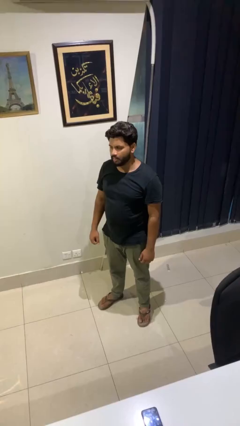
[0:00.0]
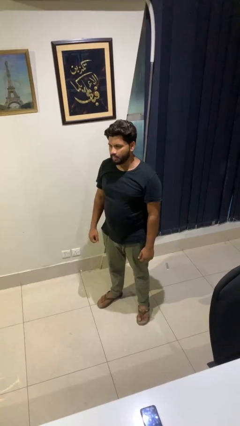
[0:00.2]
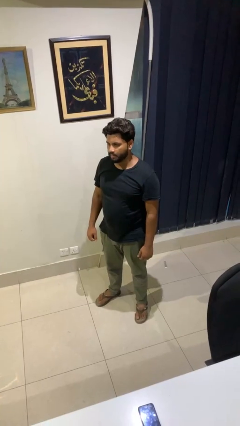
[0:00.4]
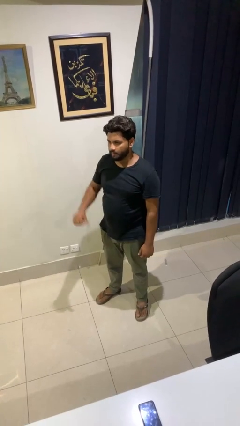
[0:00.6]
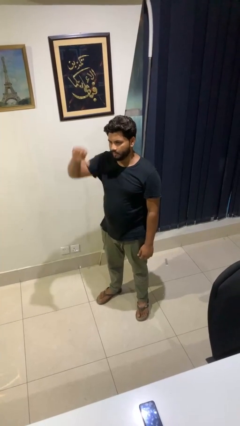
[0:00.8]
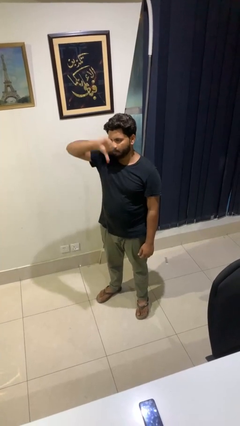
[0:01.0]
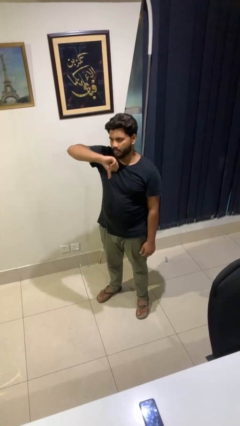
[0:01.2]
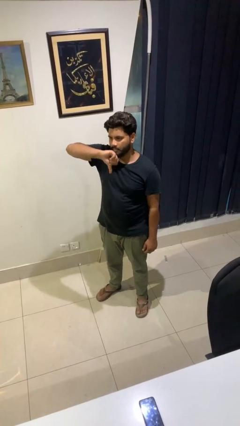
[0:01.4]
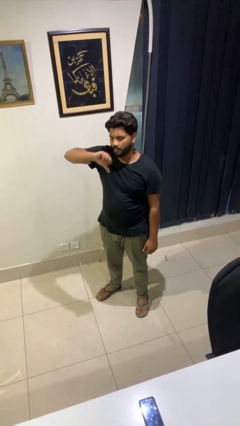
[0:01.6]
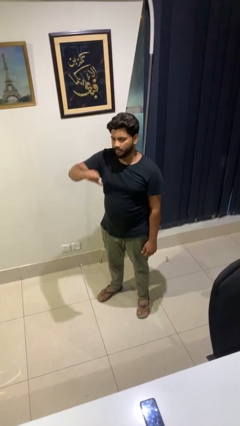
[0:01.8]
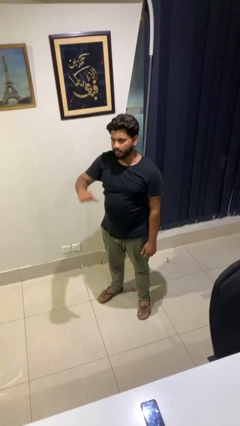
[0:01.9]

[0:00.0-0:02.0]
person gestures thumbs down

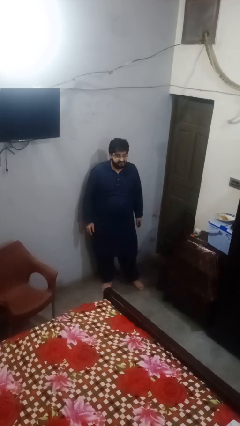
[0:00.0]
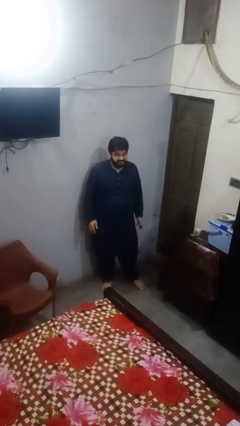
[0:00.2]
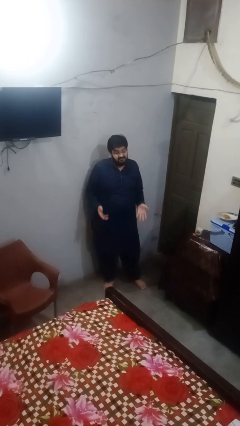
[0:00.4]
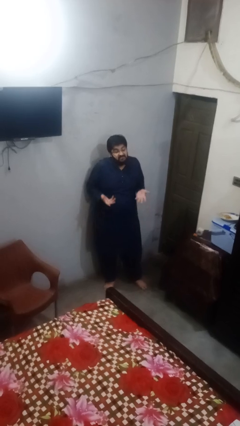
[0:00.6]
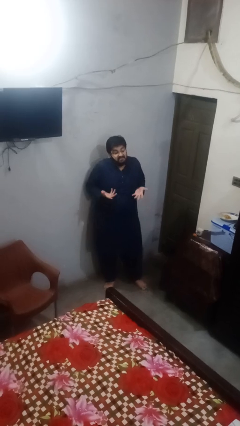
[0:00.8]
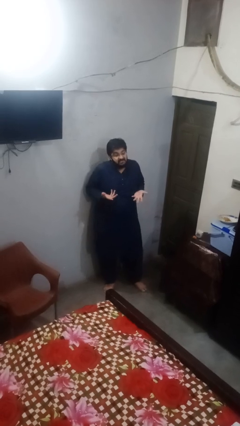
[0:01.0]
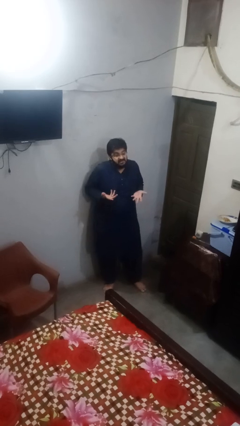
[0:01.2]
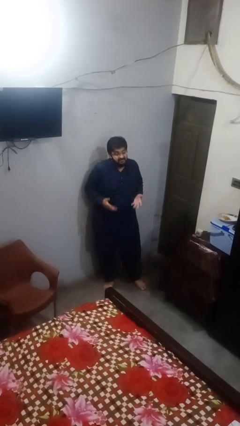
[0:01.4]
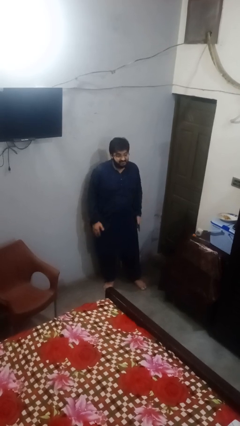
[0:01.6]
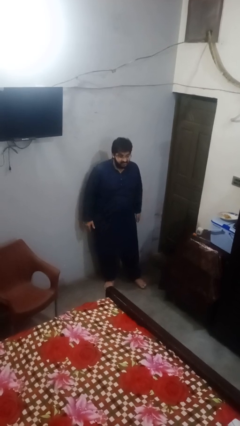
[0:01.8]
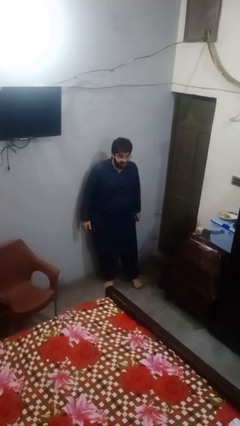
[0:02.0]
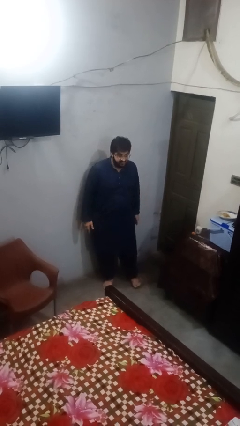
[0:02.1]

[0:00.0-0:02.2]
person shrugs

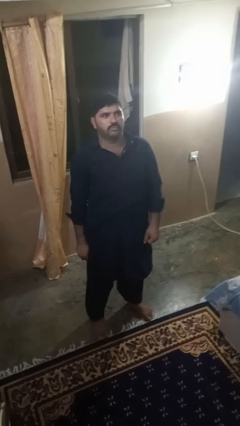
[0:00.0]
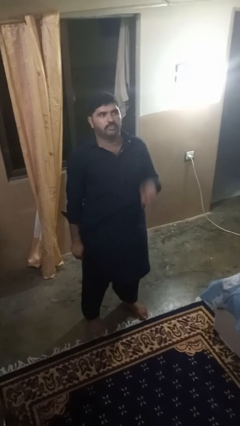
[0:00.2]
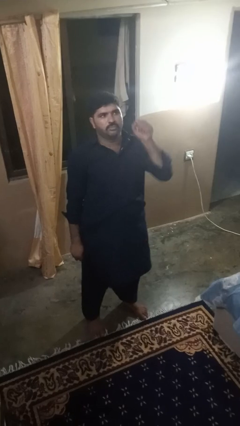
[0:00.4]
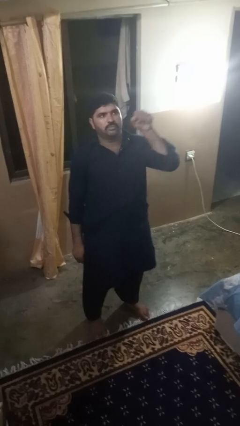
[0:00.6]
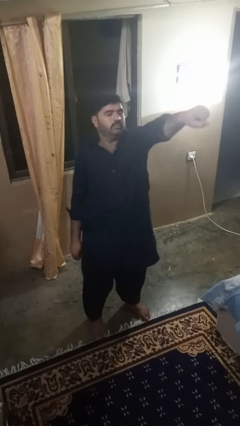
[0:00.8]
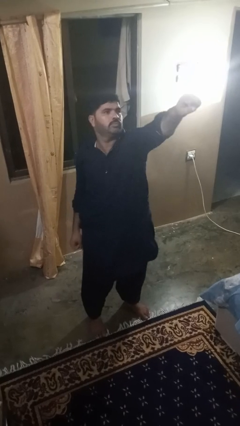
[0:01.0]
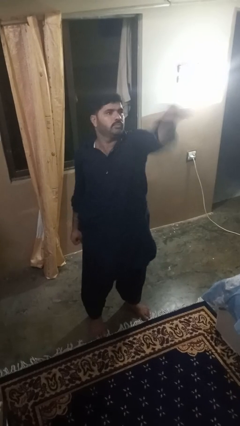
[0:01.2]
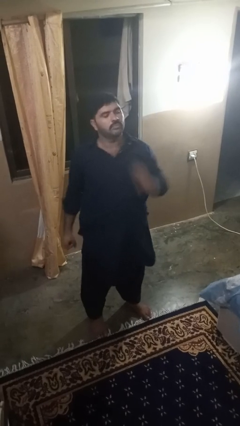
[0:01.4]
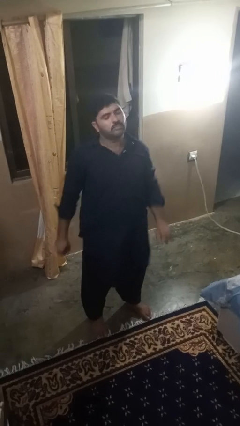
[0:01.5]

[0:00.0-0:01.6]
person punches

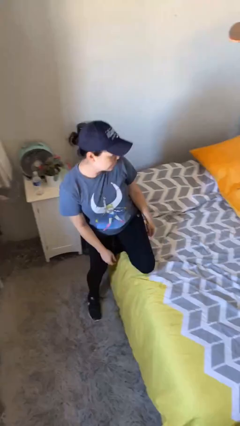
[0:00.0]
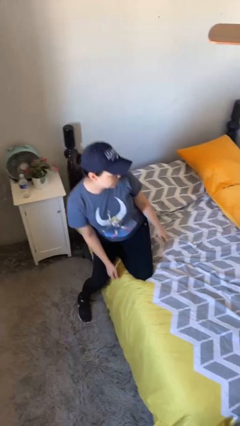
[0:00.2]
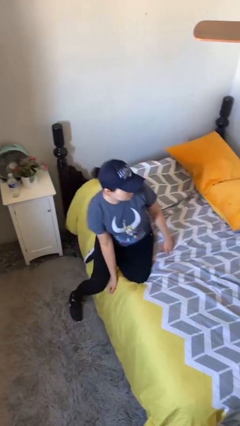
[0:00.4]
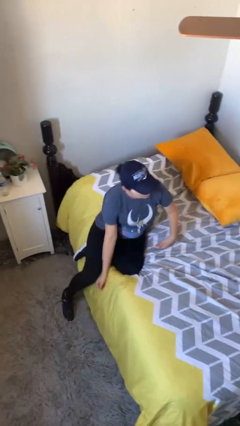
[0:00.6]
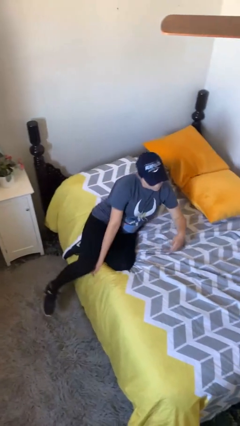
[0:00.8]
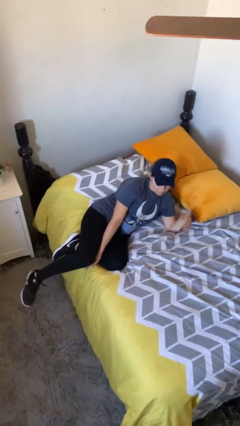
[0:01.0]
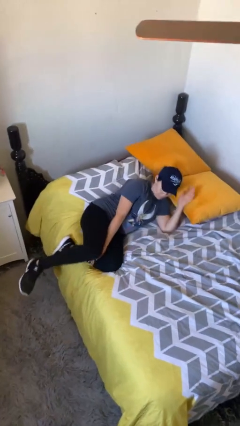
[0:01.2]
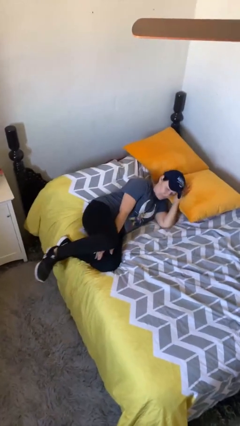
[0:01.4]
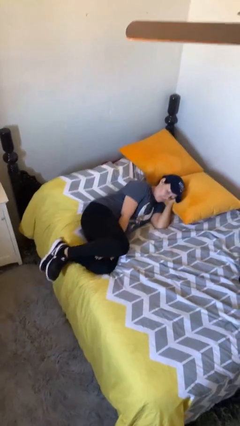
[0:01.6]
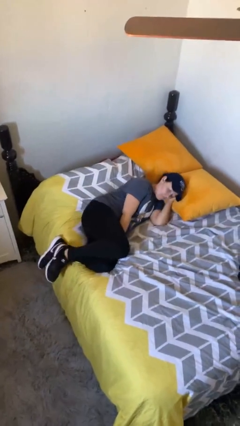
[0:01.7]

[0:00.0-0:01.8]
person lies down on bed

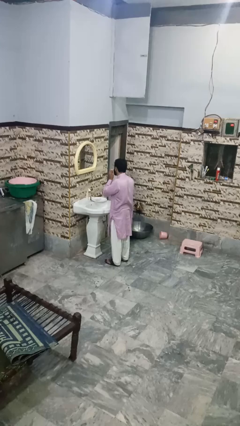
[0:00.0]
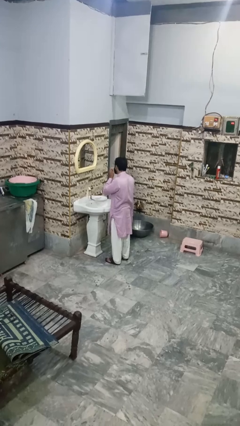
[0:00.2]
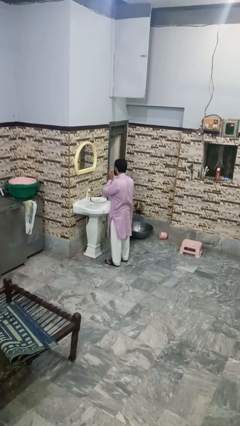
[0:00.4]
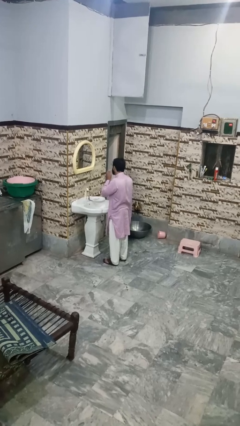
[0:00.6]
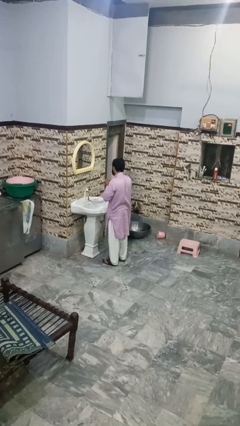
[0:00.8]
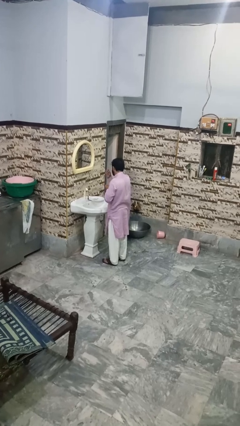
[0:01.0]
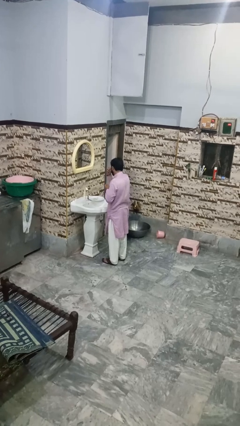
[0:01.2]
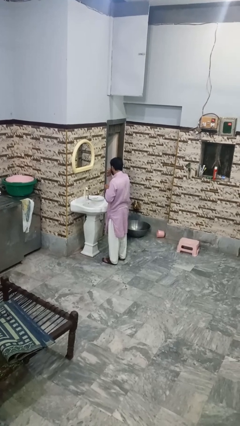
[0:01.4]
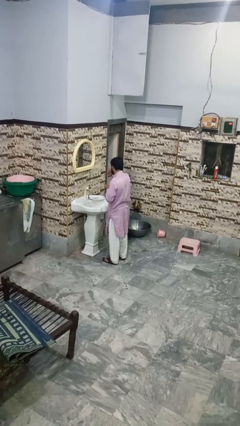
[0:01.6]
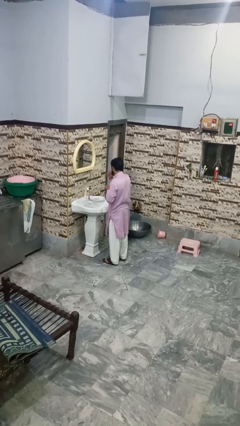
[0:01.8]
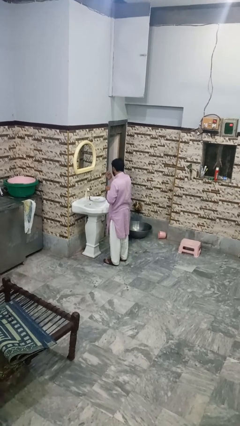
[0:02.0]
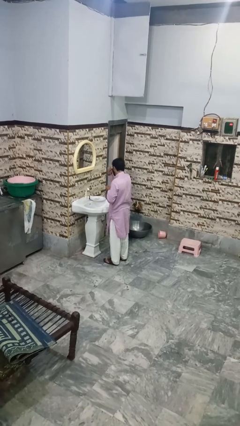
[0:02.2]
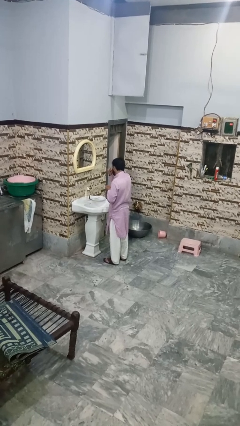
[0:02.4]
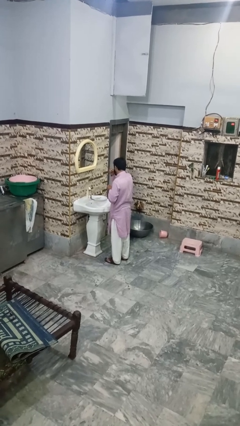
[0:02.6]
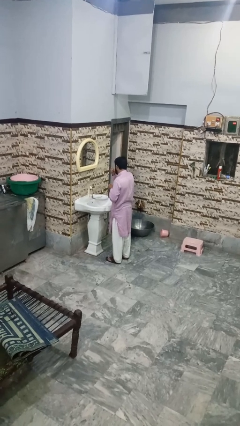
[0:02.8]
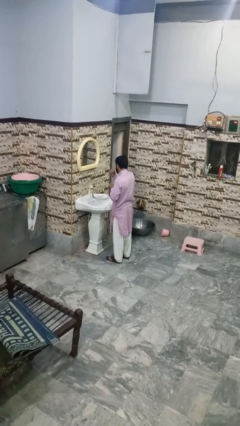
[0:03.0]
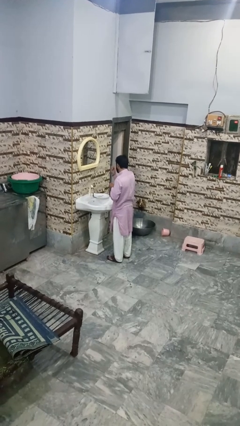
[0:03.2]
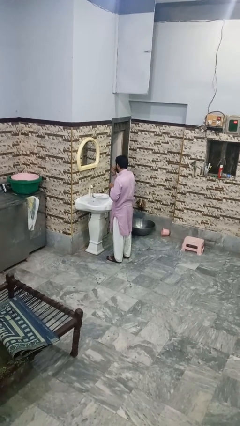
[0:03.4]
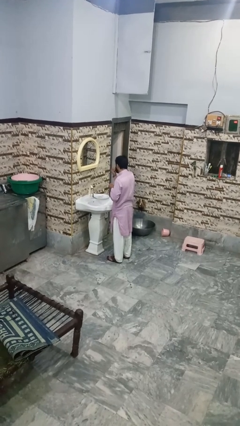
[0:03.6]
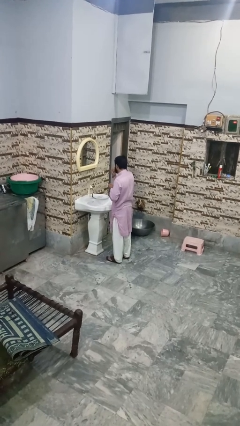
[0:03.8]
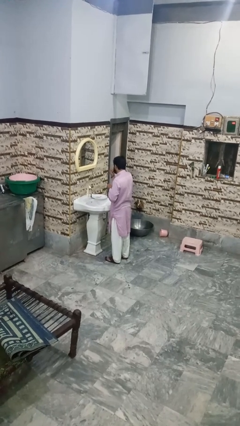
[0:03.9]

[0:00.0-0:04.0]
person shaves face

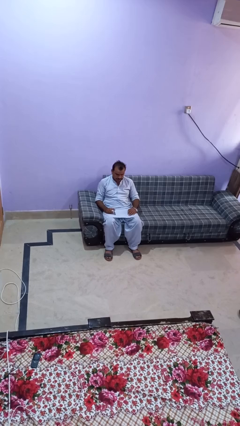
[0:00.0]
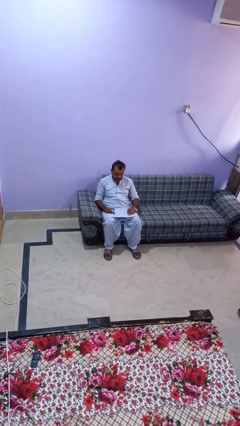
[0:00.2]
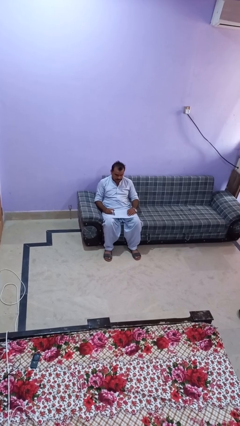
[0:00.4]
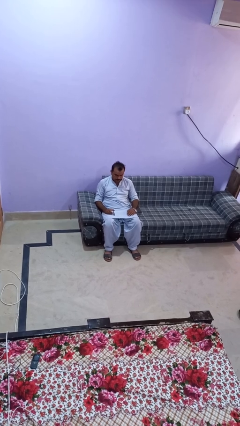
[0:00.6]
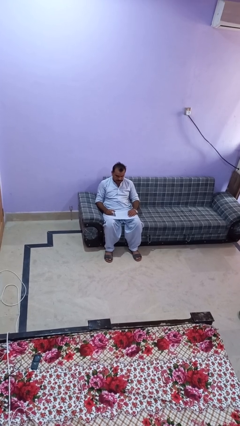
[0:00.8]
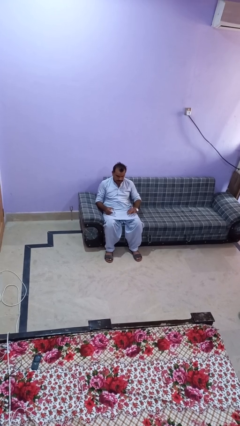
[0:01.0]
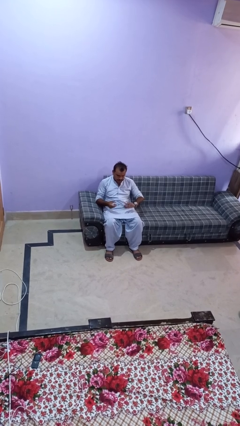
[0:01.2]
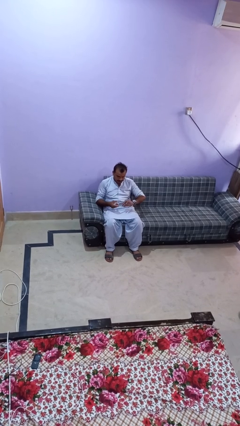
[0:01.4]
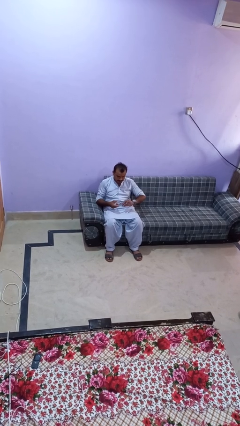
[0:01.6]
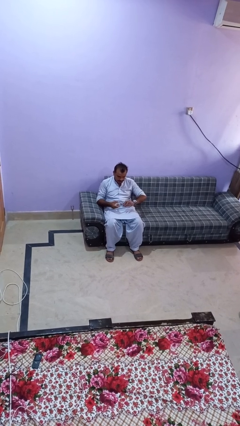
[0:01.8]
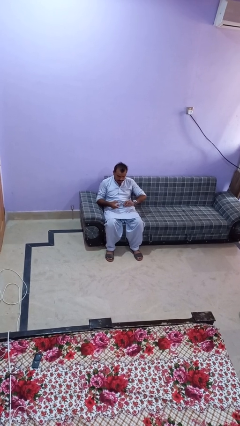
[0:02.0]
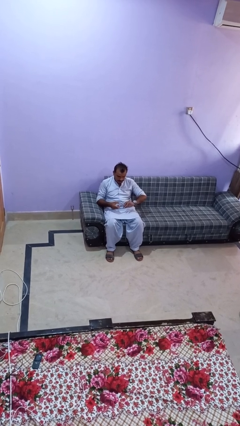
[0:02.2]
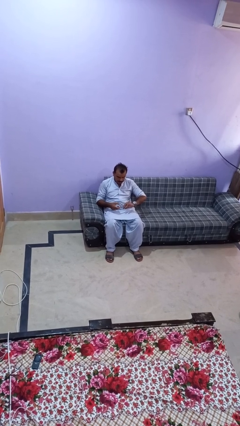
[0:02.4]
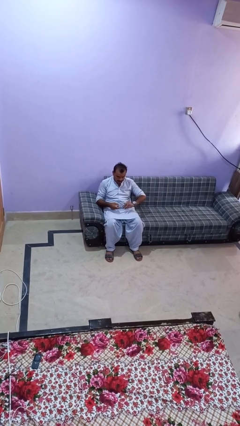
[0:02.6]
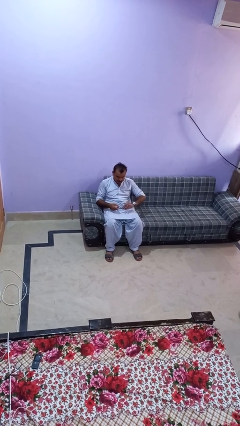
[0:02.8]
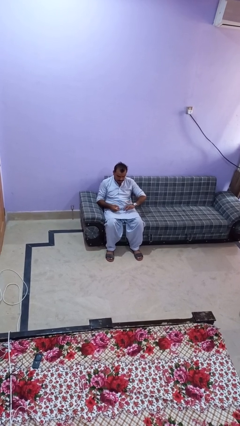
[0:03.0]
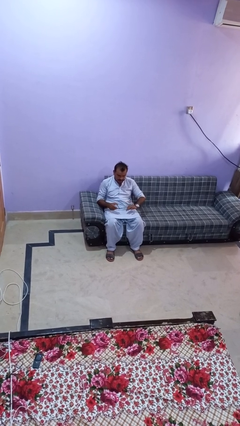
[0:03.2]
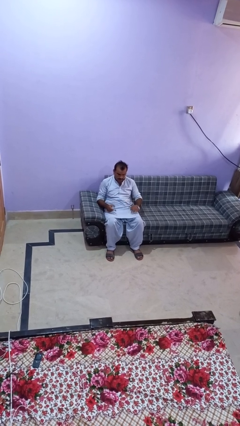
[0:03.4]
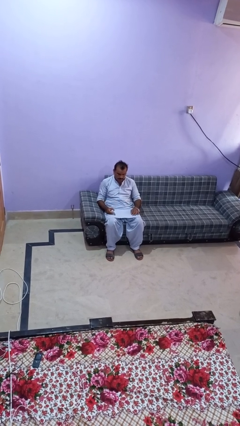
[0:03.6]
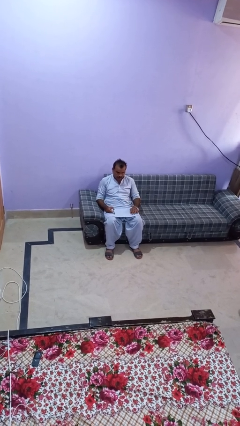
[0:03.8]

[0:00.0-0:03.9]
person clips fingernails

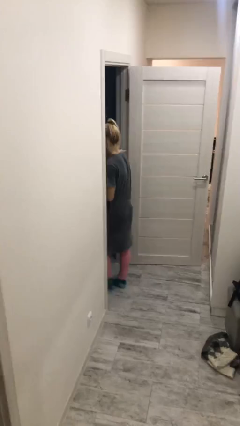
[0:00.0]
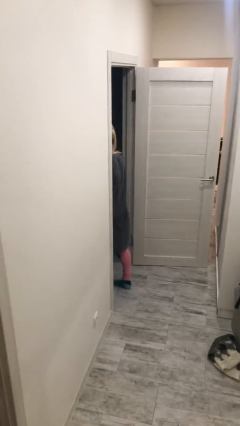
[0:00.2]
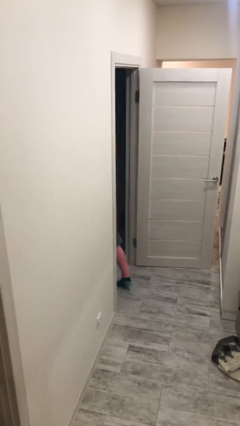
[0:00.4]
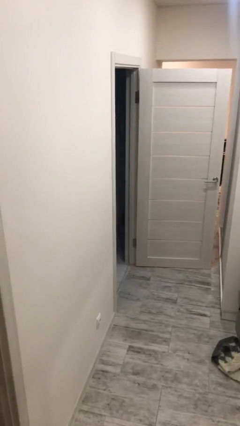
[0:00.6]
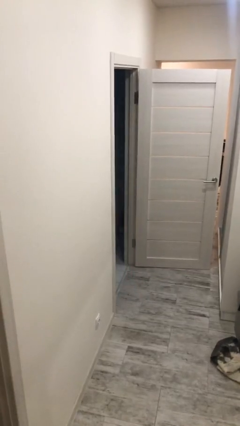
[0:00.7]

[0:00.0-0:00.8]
person exits scene through structure

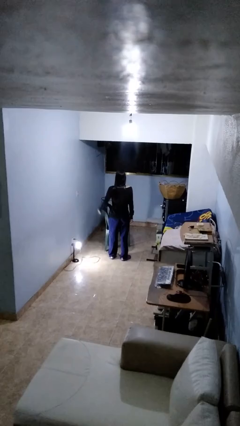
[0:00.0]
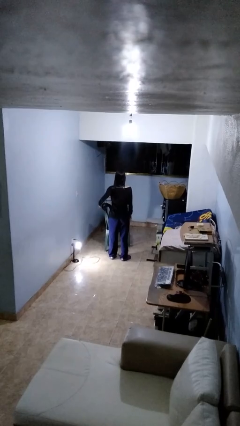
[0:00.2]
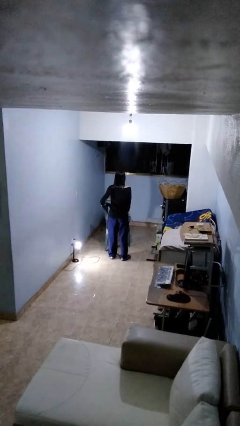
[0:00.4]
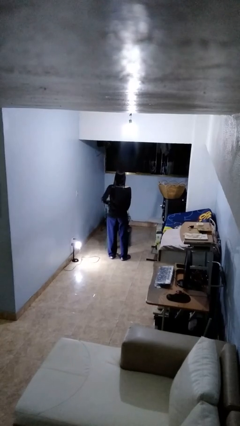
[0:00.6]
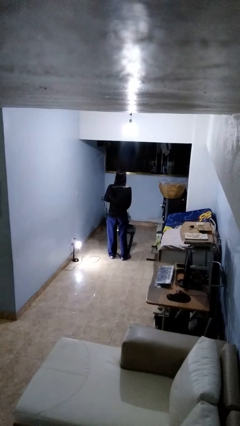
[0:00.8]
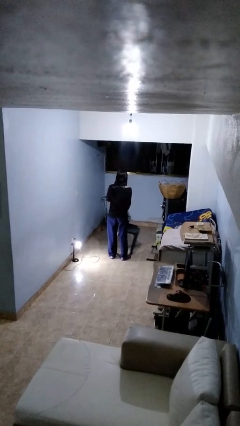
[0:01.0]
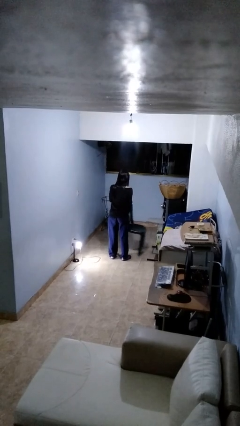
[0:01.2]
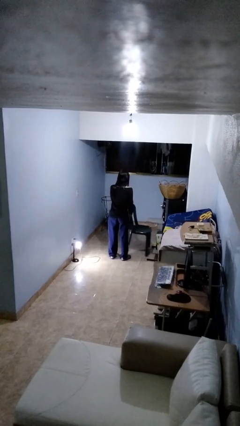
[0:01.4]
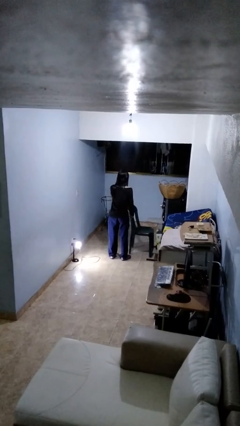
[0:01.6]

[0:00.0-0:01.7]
person pushes in chair
